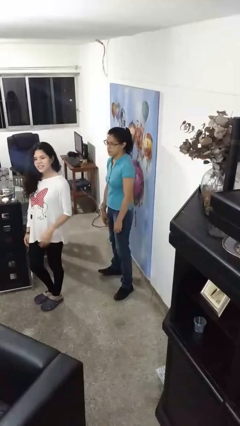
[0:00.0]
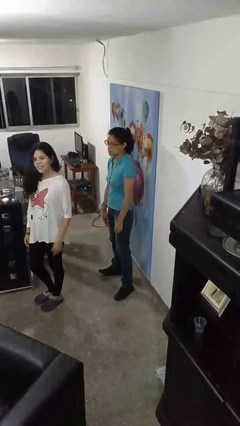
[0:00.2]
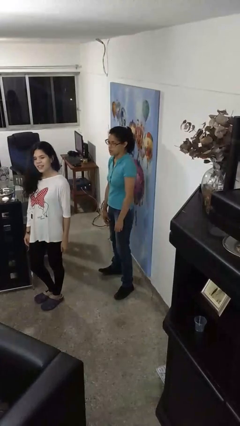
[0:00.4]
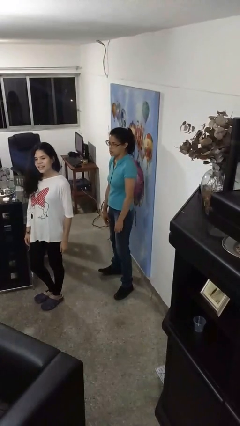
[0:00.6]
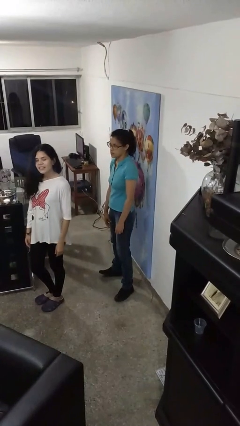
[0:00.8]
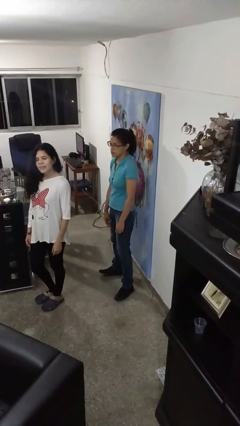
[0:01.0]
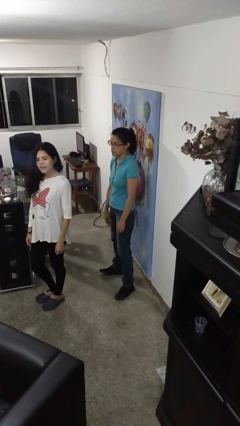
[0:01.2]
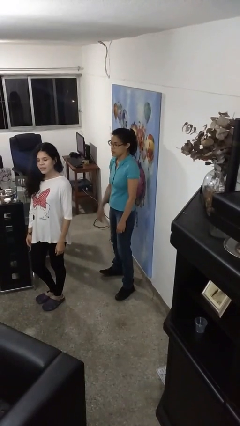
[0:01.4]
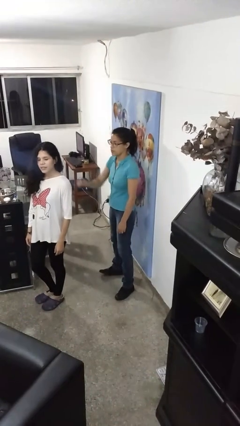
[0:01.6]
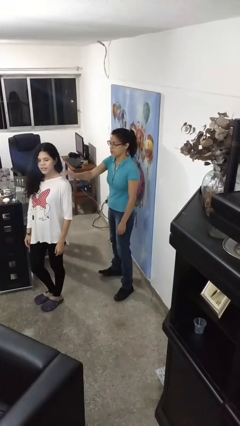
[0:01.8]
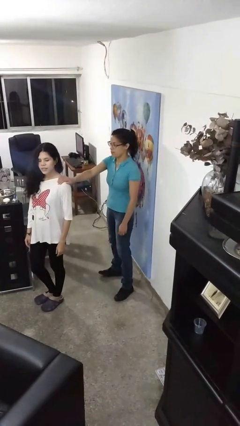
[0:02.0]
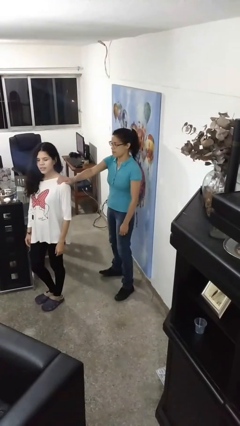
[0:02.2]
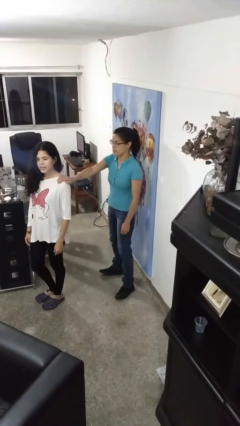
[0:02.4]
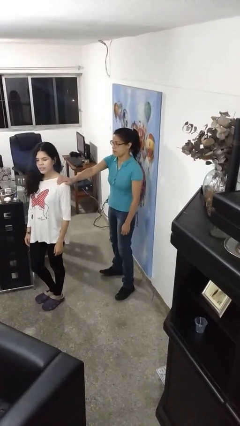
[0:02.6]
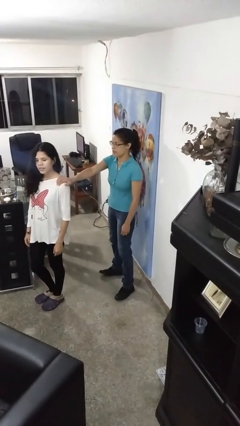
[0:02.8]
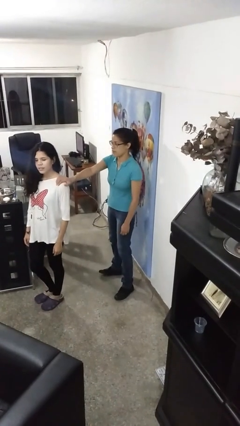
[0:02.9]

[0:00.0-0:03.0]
person grabs person by shoulder

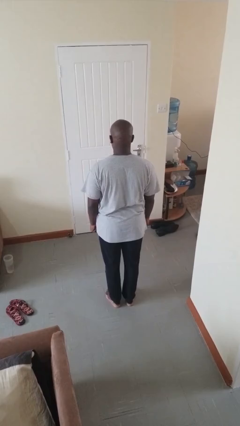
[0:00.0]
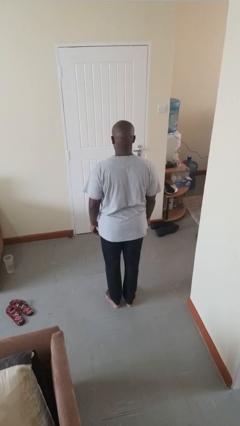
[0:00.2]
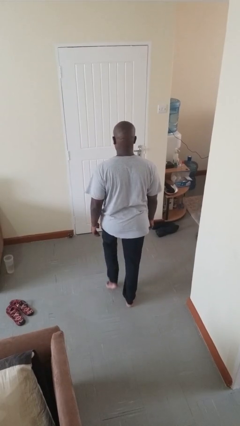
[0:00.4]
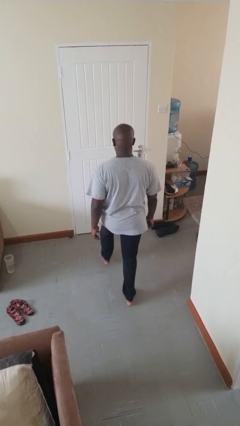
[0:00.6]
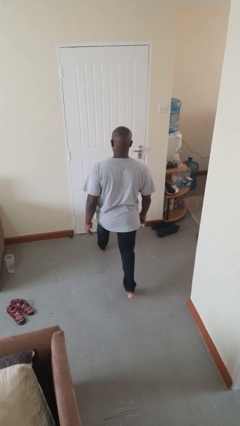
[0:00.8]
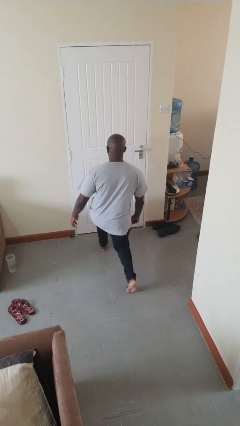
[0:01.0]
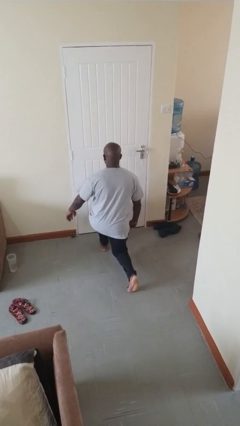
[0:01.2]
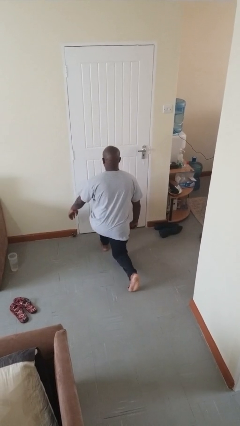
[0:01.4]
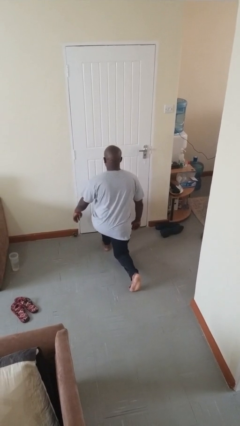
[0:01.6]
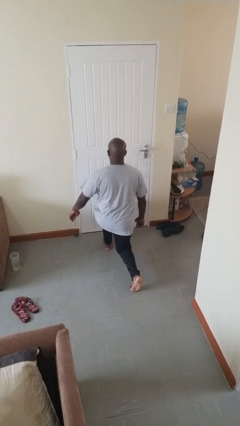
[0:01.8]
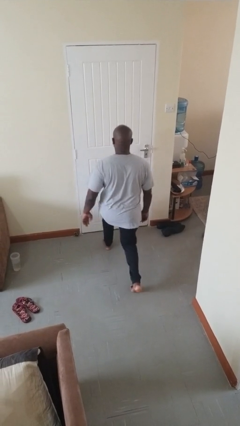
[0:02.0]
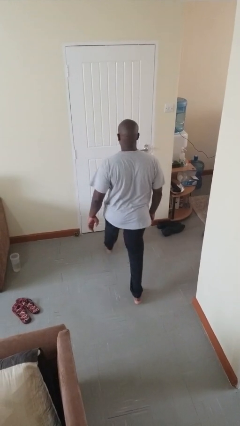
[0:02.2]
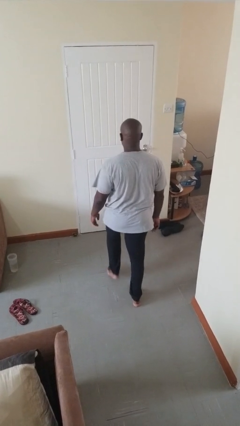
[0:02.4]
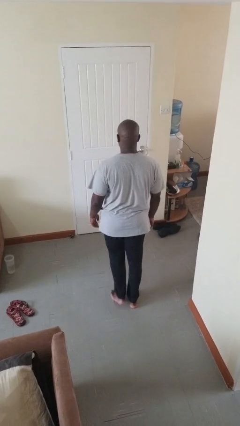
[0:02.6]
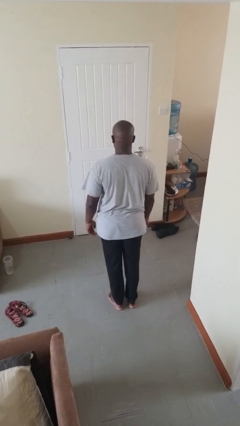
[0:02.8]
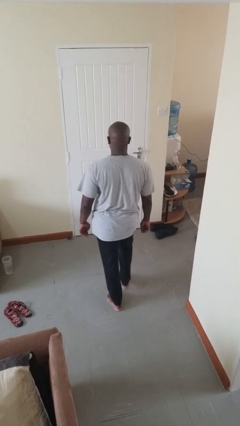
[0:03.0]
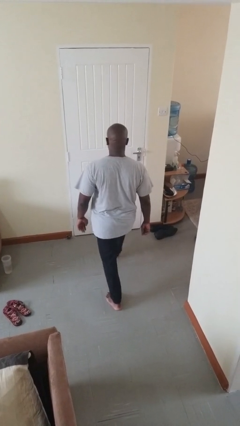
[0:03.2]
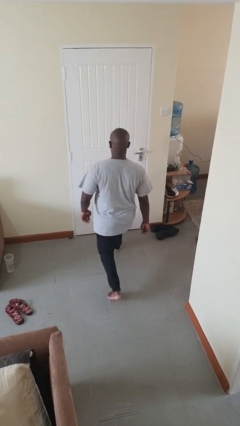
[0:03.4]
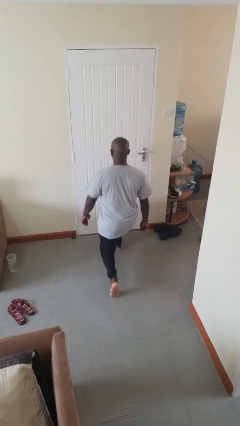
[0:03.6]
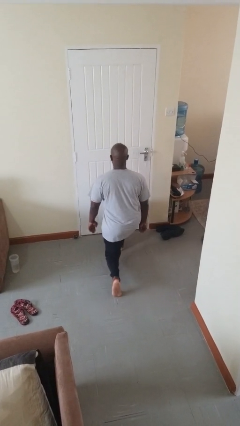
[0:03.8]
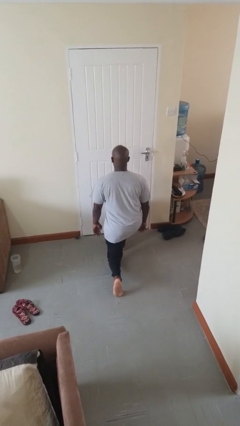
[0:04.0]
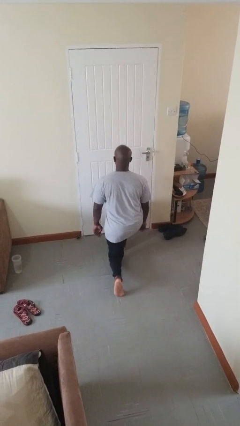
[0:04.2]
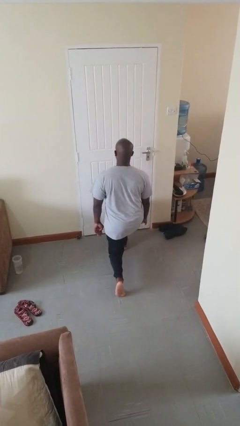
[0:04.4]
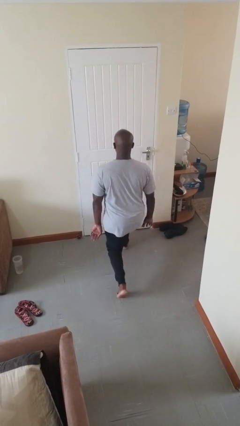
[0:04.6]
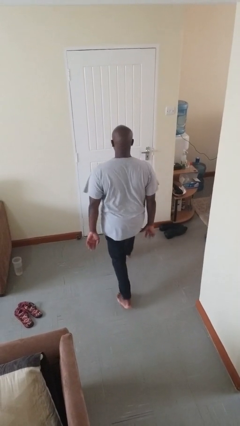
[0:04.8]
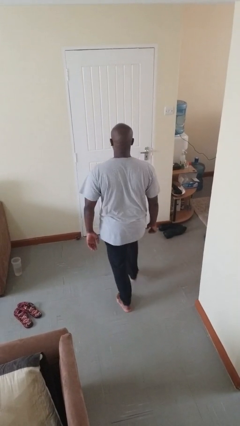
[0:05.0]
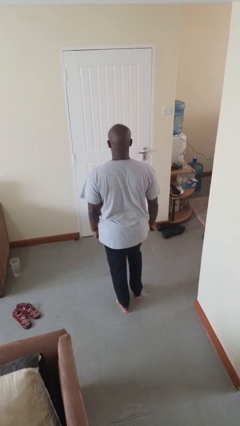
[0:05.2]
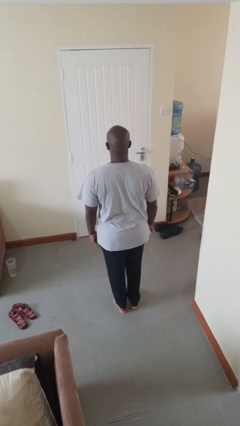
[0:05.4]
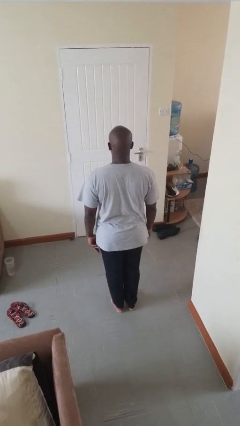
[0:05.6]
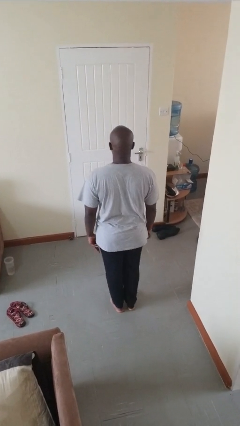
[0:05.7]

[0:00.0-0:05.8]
person exercises with lunges

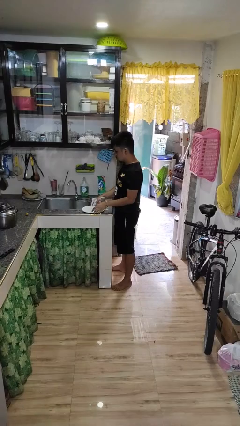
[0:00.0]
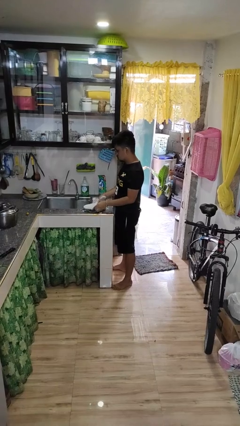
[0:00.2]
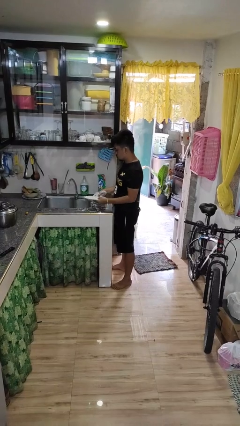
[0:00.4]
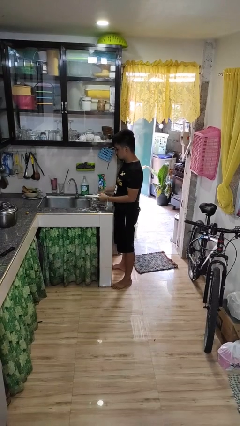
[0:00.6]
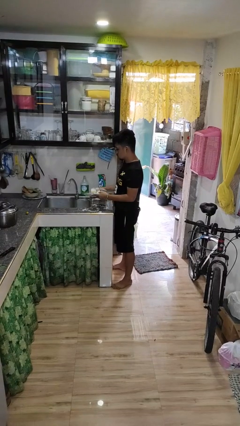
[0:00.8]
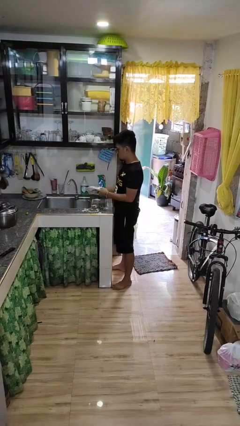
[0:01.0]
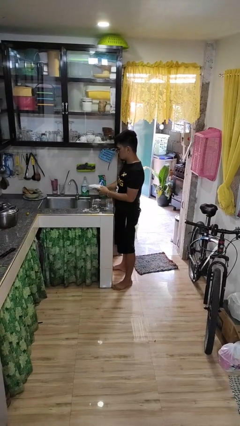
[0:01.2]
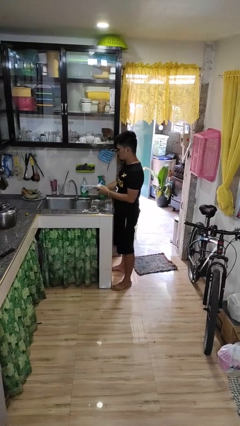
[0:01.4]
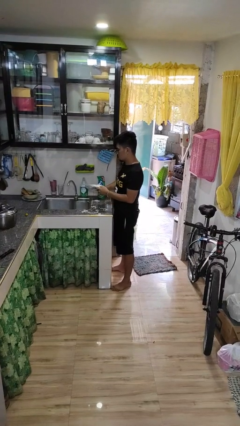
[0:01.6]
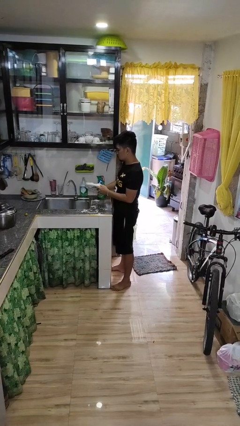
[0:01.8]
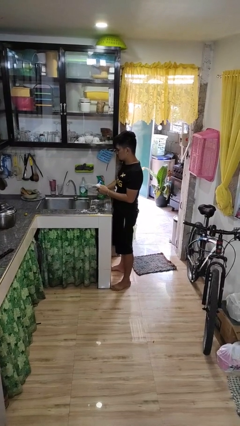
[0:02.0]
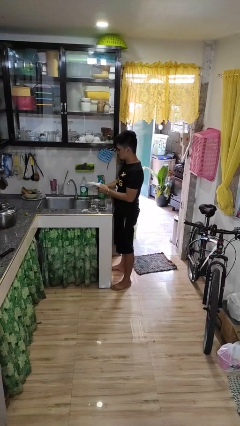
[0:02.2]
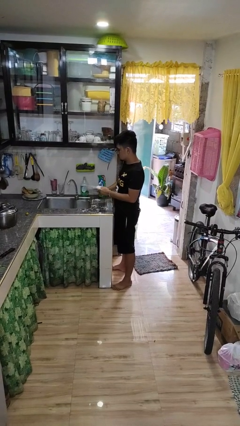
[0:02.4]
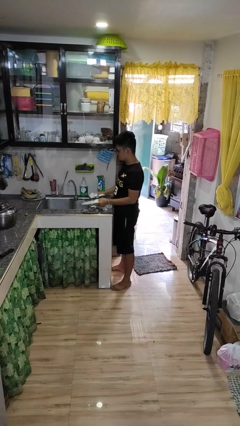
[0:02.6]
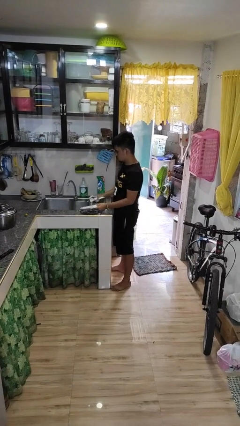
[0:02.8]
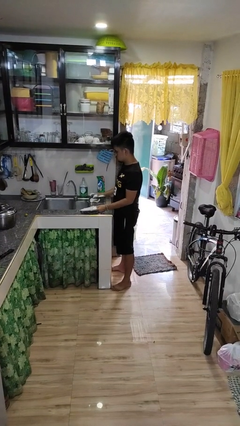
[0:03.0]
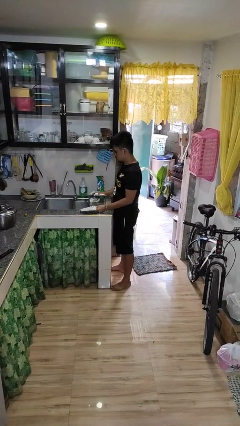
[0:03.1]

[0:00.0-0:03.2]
person washes dish

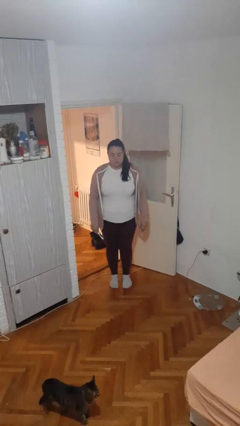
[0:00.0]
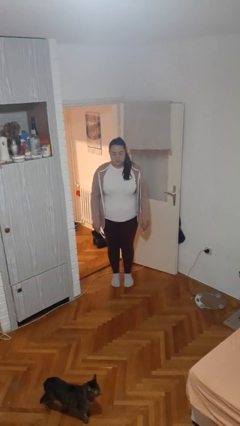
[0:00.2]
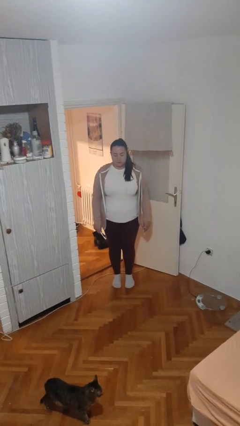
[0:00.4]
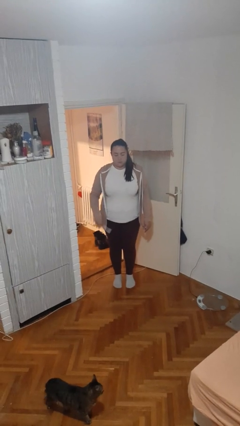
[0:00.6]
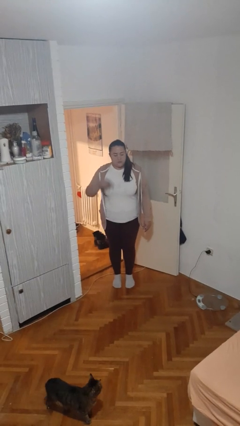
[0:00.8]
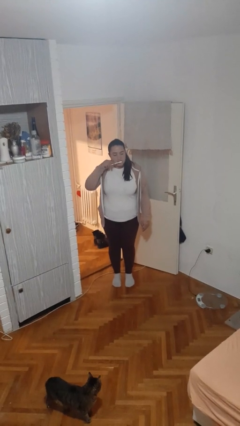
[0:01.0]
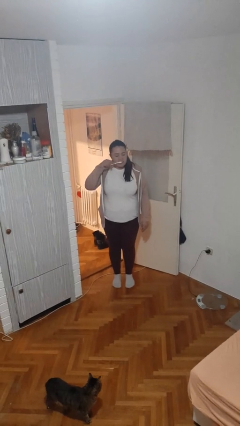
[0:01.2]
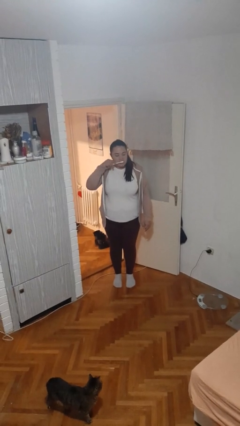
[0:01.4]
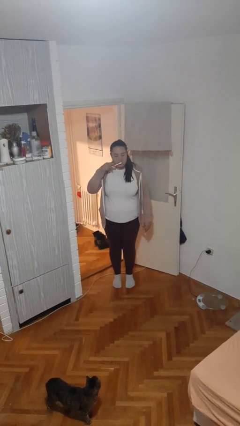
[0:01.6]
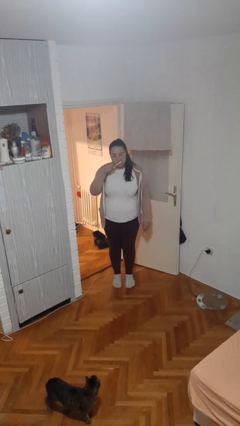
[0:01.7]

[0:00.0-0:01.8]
person brushes hair

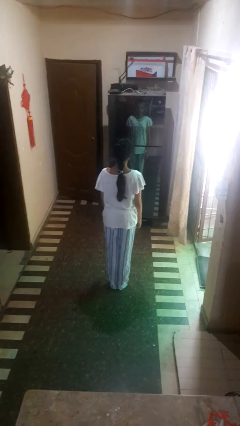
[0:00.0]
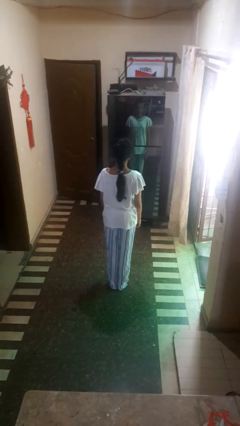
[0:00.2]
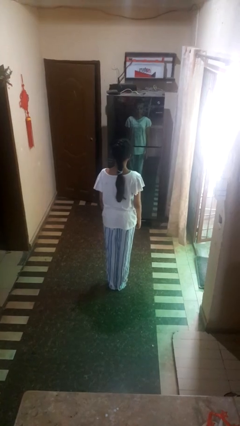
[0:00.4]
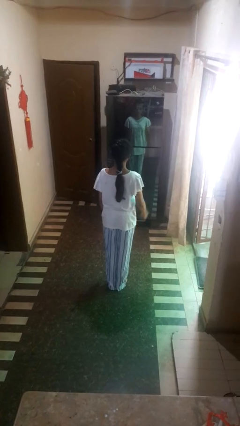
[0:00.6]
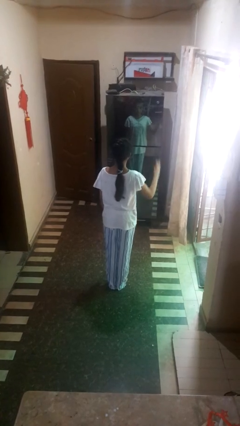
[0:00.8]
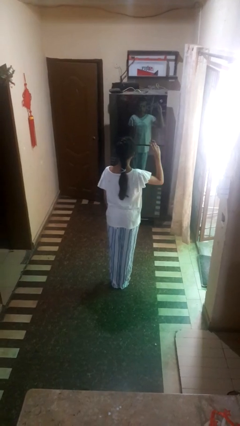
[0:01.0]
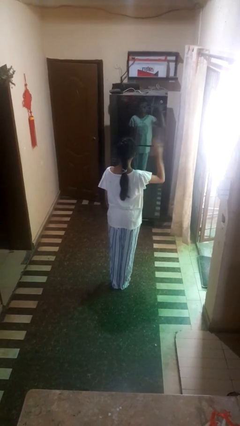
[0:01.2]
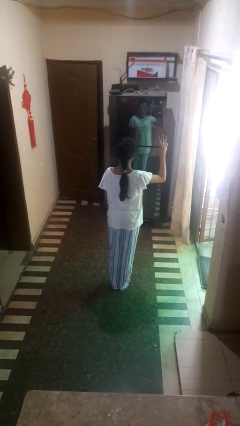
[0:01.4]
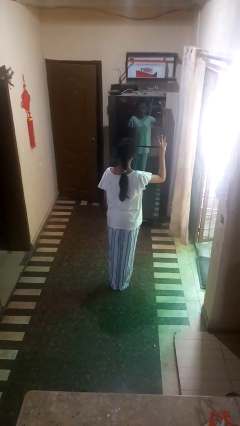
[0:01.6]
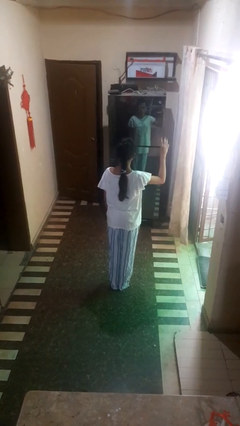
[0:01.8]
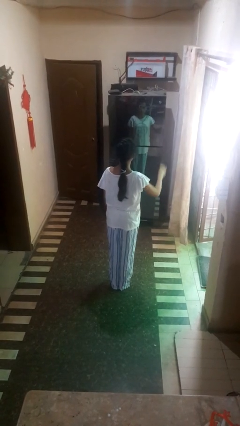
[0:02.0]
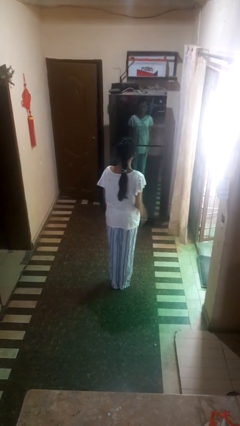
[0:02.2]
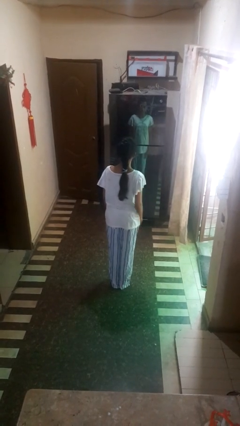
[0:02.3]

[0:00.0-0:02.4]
person gestures number three

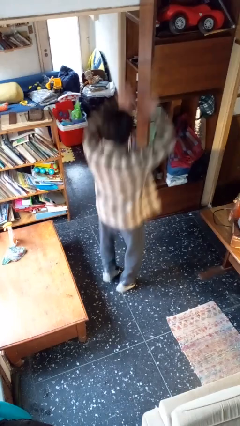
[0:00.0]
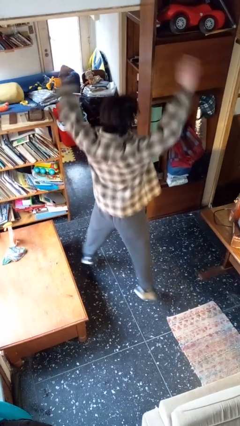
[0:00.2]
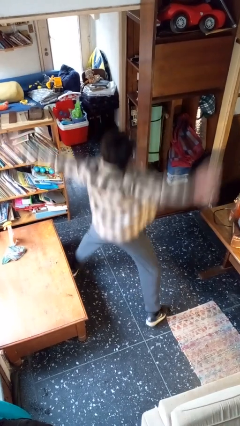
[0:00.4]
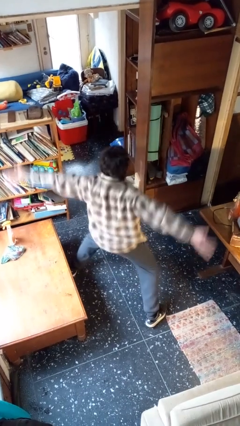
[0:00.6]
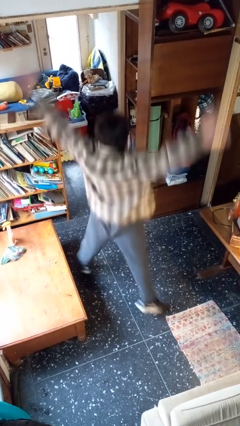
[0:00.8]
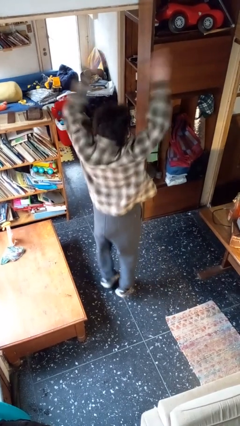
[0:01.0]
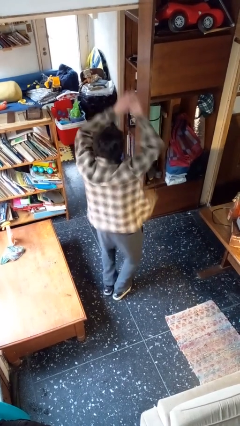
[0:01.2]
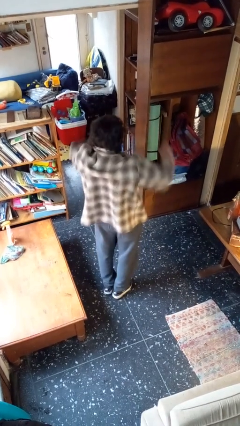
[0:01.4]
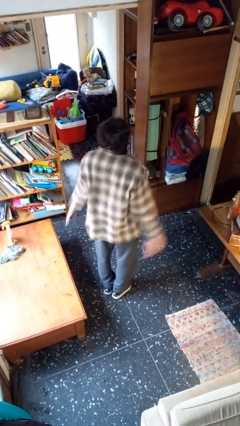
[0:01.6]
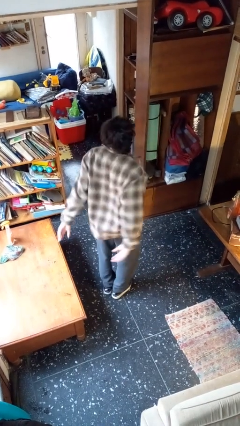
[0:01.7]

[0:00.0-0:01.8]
person exercises with jumping jacks
